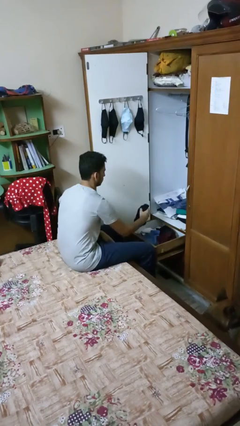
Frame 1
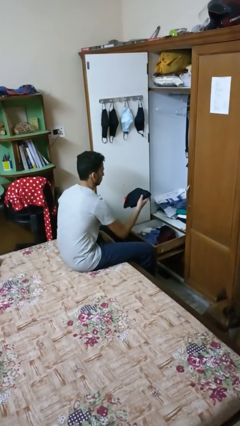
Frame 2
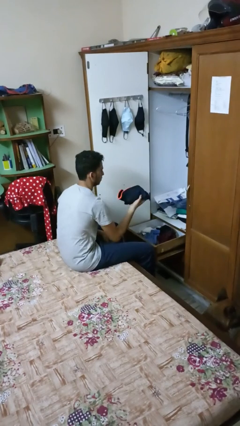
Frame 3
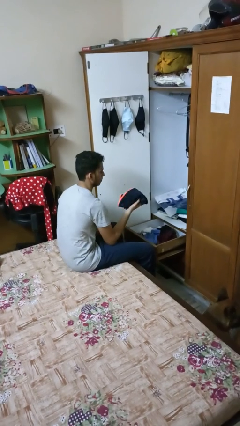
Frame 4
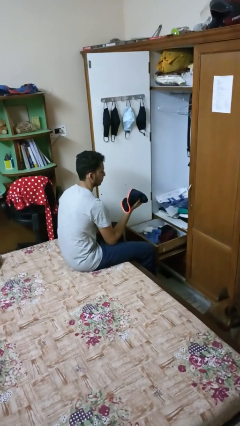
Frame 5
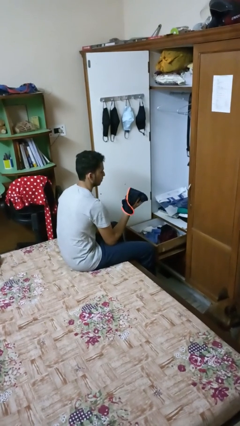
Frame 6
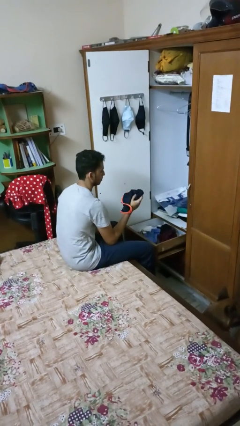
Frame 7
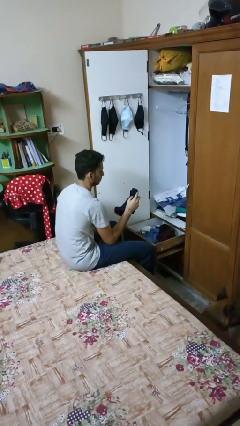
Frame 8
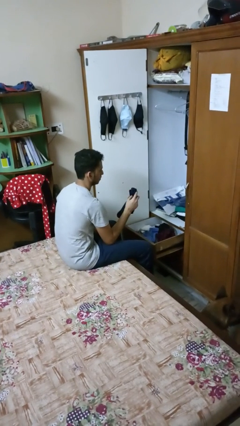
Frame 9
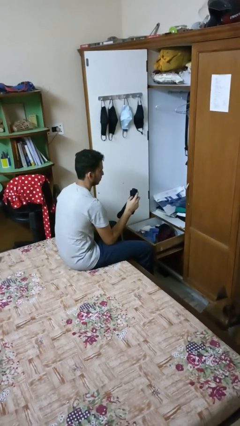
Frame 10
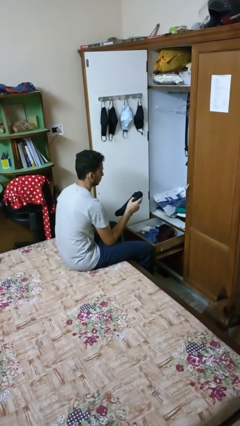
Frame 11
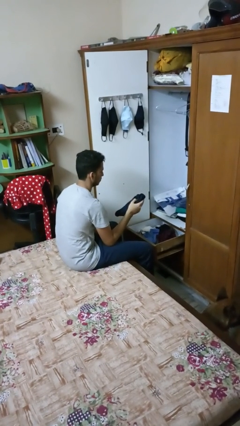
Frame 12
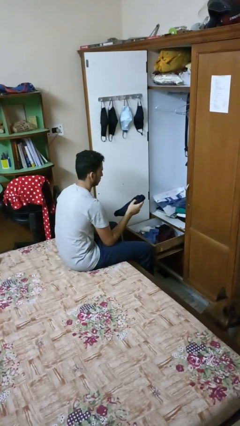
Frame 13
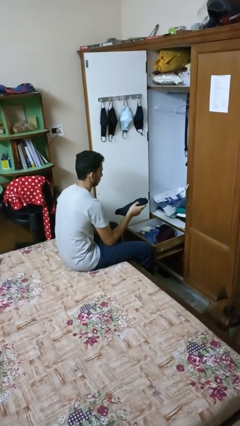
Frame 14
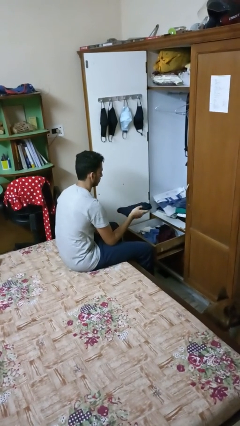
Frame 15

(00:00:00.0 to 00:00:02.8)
person takes clothes from dresser

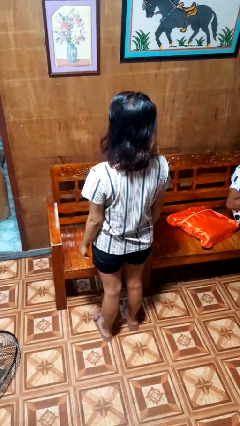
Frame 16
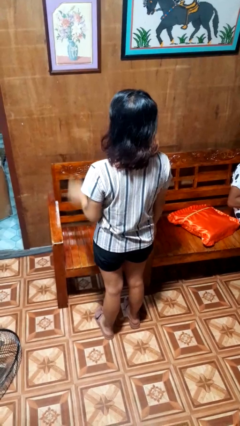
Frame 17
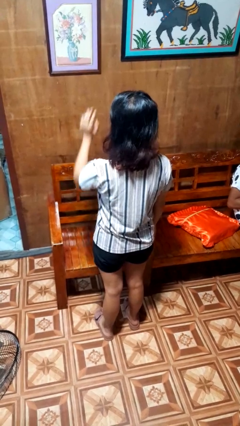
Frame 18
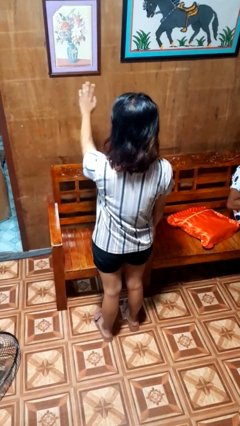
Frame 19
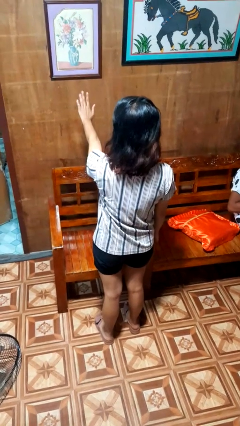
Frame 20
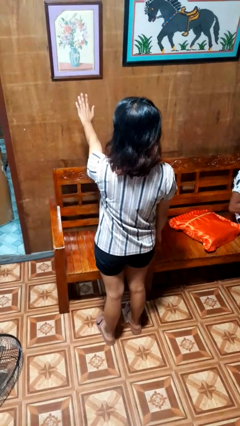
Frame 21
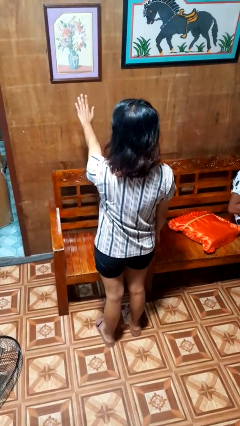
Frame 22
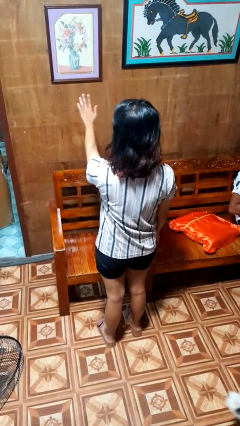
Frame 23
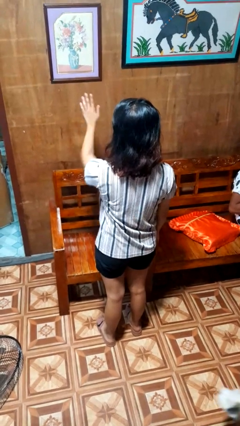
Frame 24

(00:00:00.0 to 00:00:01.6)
person gestures stop

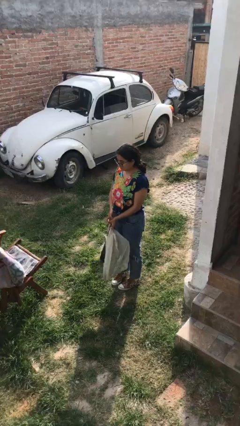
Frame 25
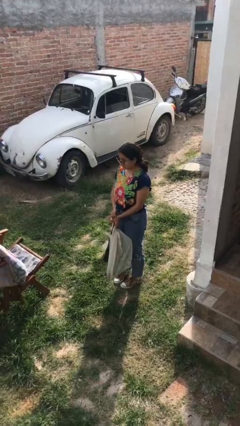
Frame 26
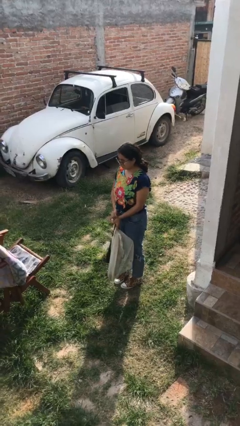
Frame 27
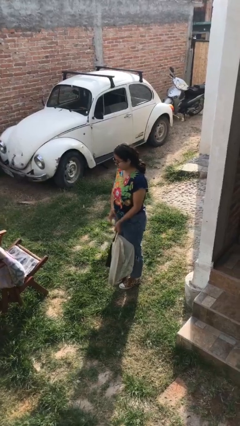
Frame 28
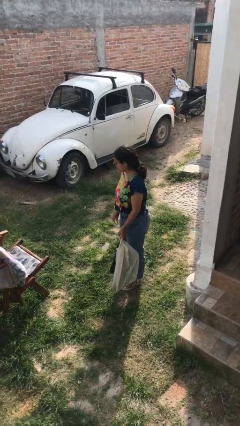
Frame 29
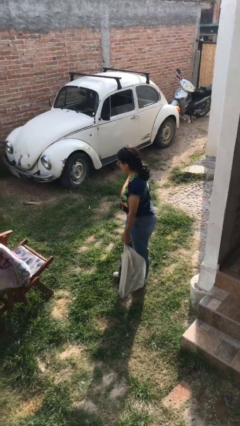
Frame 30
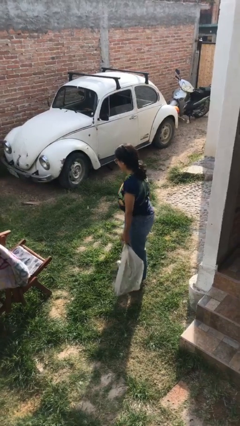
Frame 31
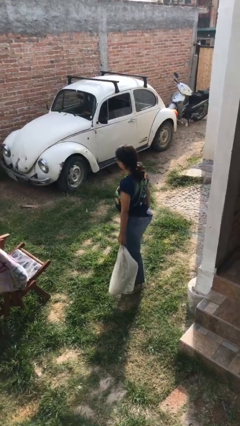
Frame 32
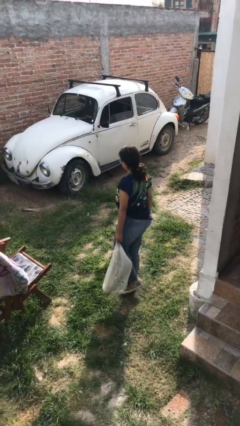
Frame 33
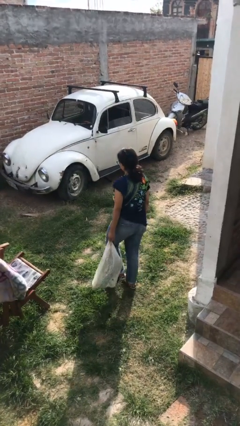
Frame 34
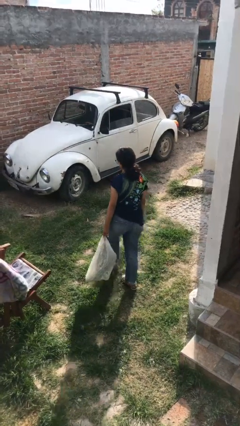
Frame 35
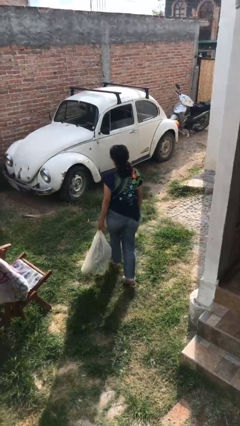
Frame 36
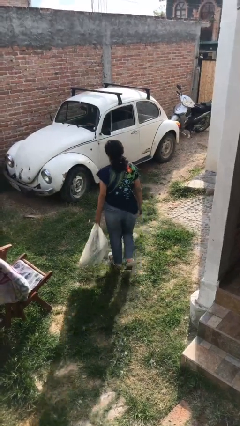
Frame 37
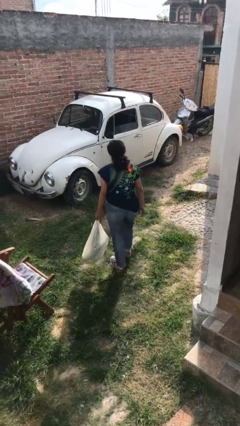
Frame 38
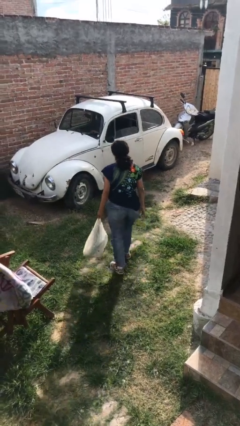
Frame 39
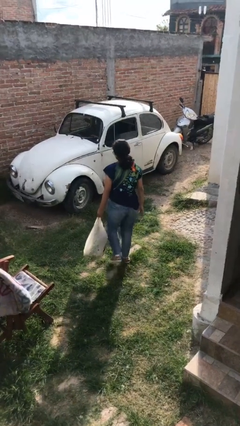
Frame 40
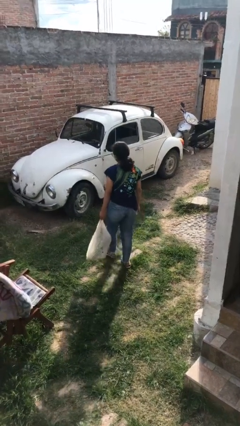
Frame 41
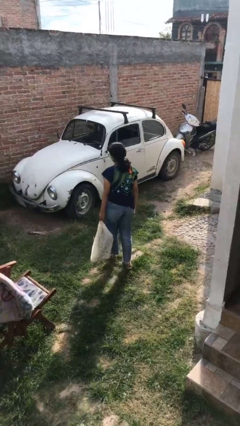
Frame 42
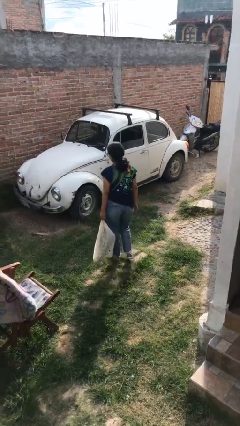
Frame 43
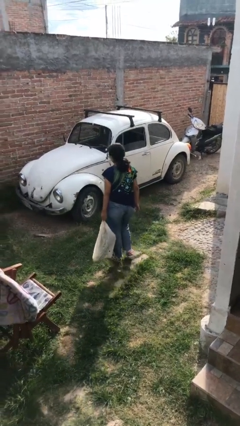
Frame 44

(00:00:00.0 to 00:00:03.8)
person carries groceries

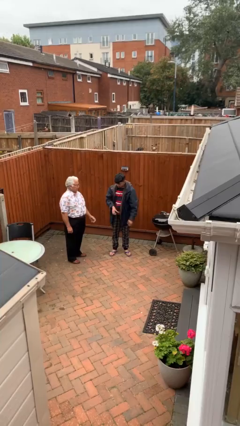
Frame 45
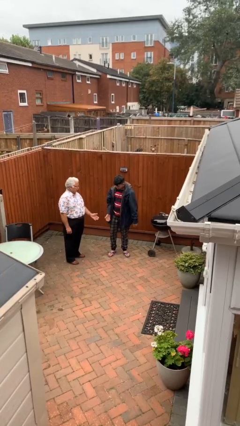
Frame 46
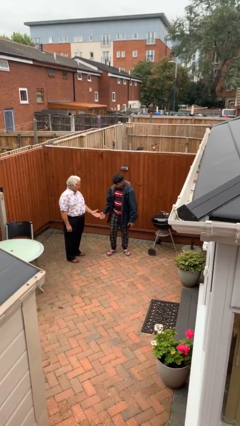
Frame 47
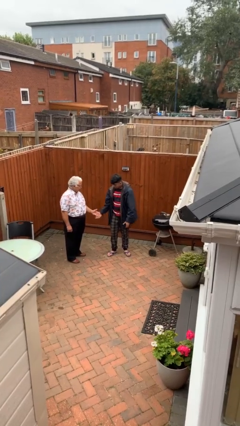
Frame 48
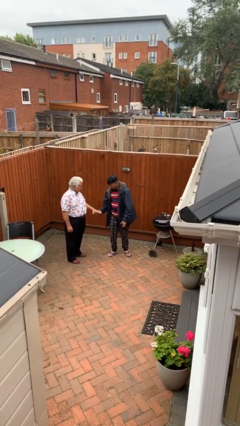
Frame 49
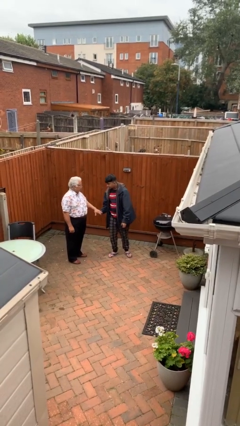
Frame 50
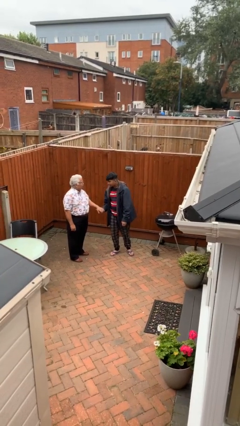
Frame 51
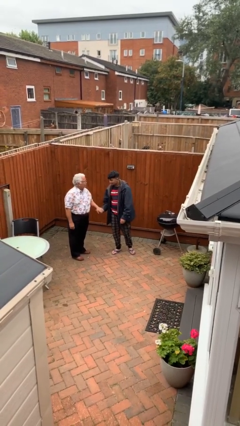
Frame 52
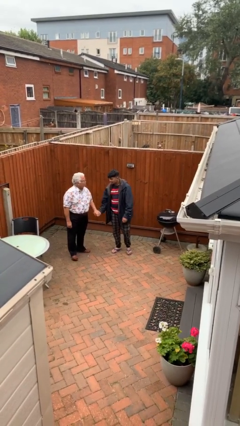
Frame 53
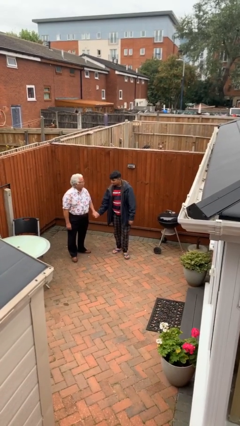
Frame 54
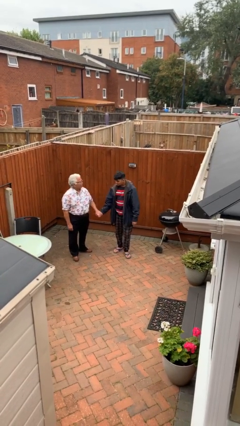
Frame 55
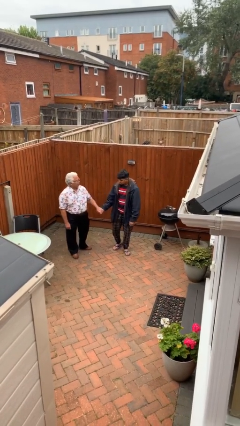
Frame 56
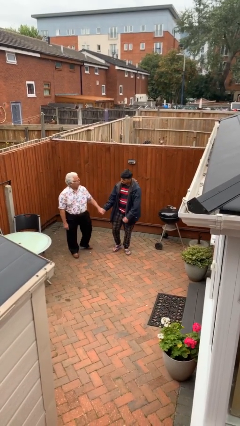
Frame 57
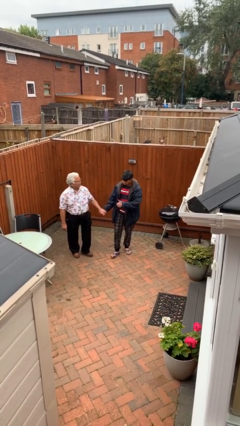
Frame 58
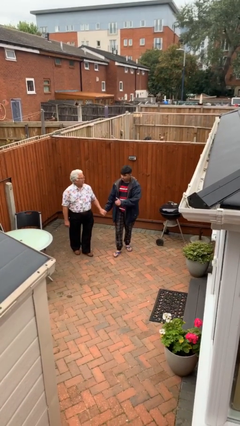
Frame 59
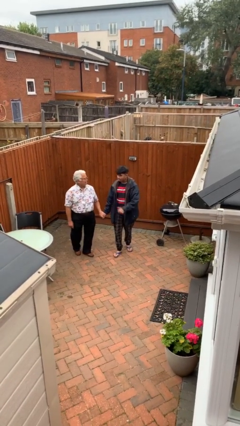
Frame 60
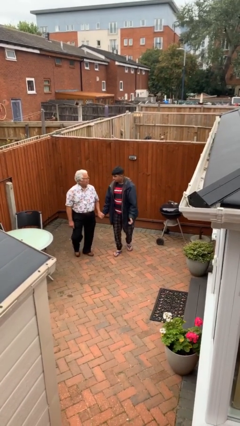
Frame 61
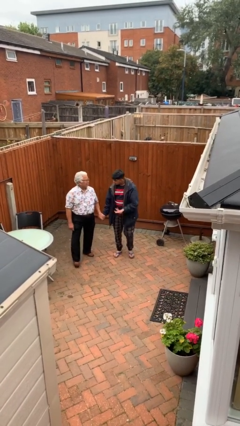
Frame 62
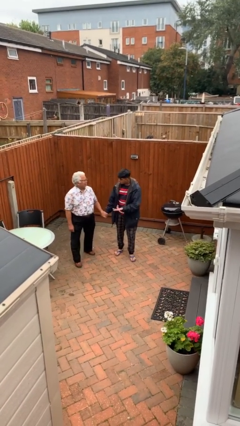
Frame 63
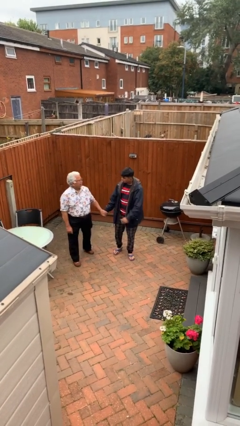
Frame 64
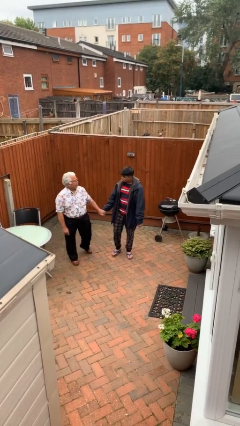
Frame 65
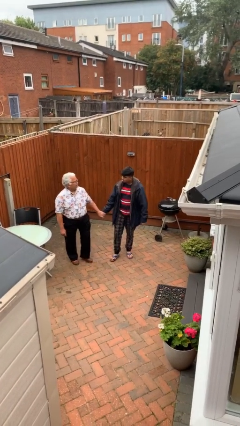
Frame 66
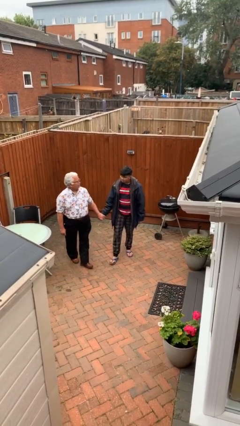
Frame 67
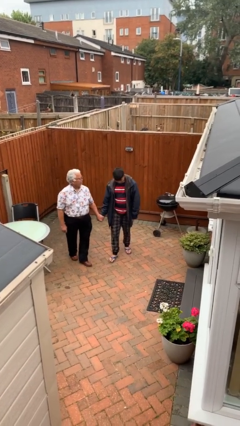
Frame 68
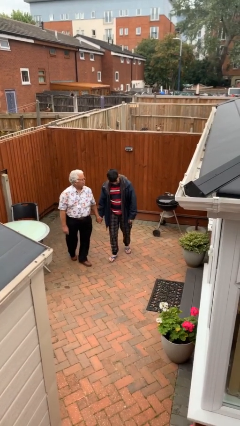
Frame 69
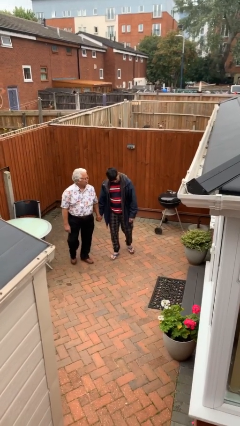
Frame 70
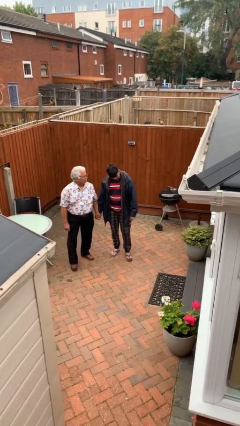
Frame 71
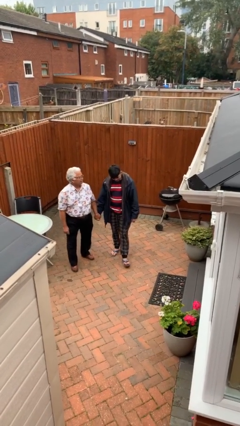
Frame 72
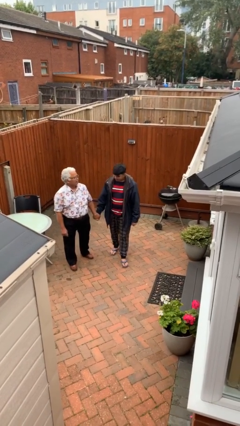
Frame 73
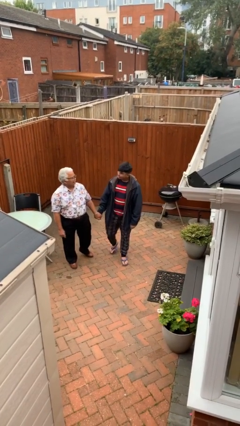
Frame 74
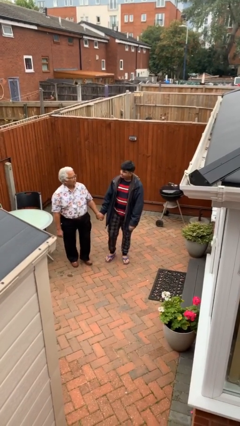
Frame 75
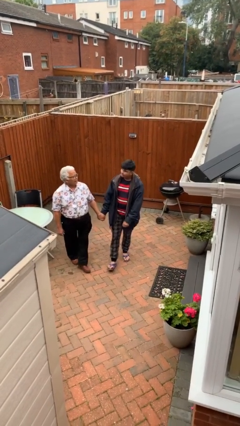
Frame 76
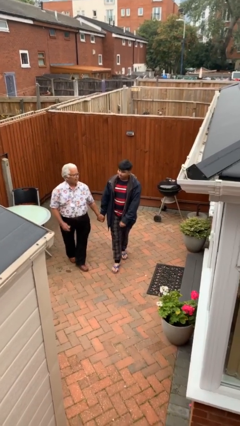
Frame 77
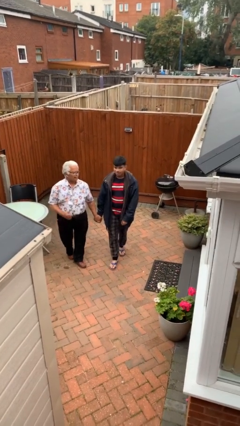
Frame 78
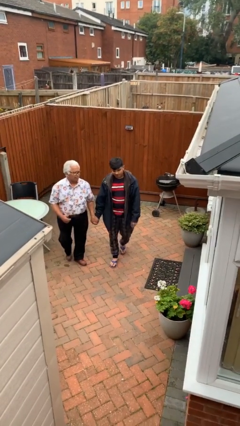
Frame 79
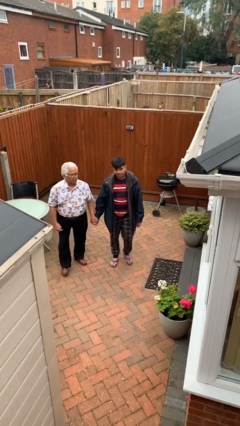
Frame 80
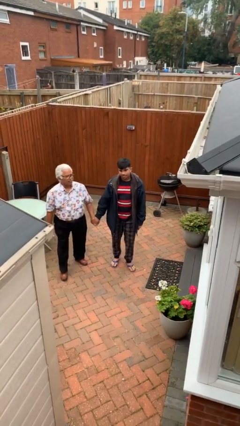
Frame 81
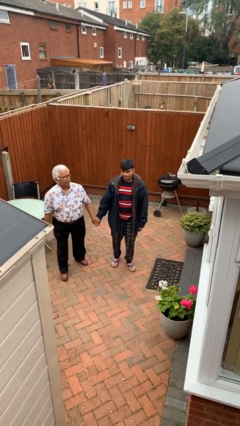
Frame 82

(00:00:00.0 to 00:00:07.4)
person holds hand

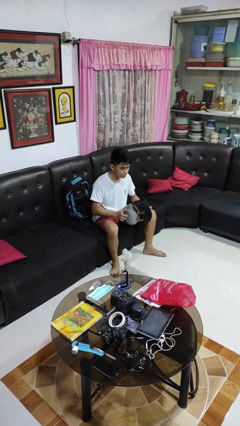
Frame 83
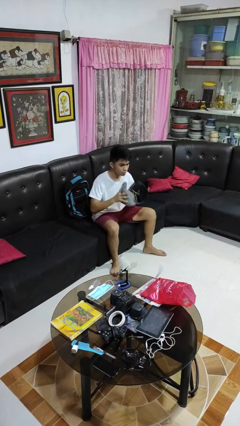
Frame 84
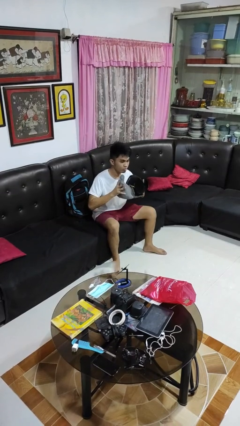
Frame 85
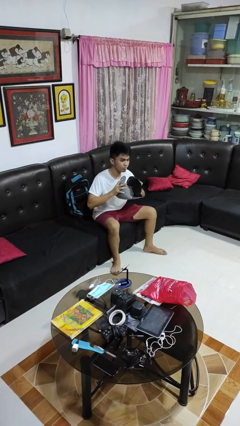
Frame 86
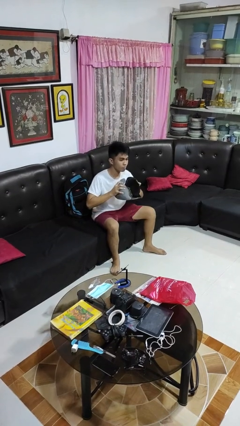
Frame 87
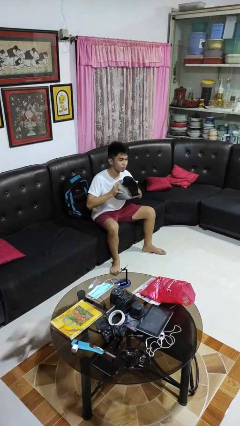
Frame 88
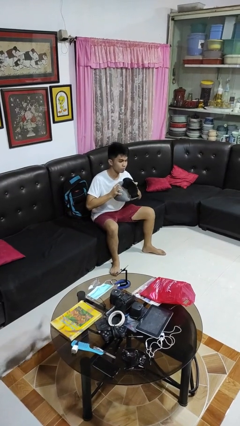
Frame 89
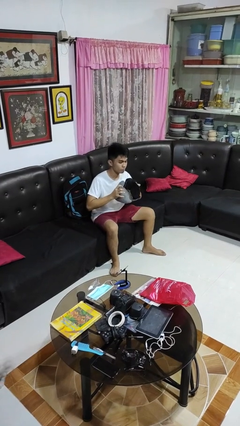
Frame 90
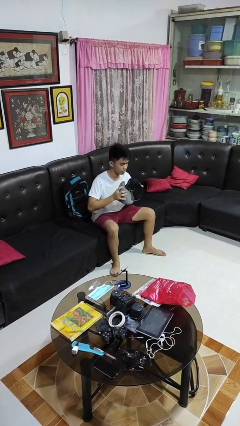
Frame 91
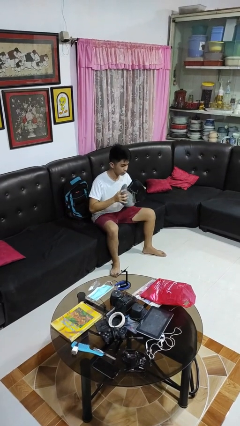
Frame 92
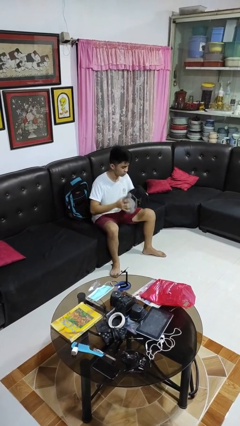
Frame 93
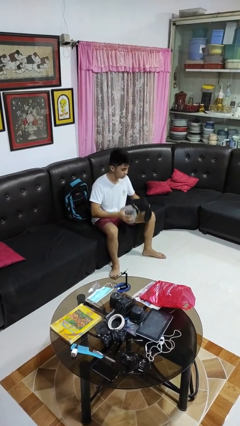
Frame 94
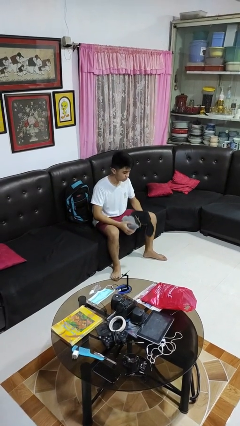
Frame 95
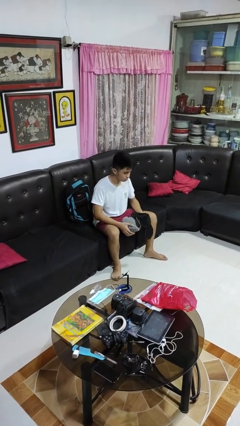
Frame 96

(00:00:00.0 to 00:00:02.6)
person squeezes object
